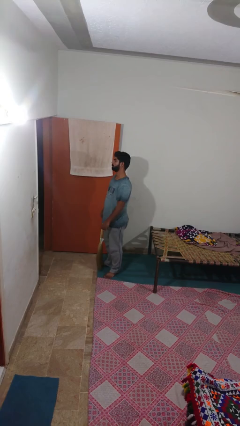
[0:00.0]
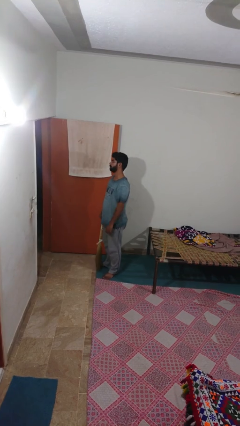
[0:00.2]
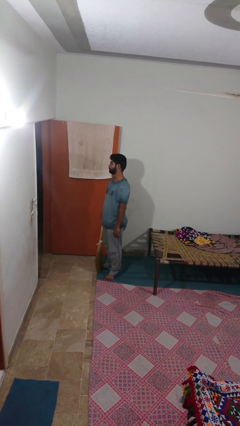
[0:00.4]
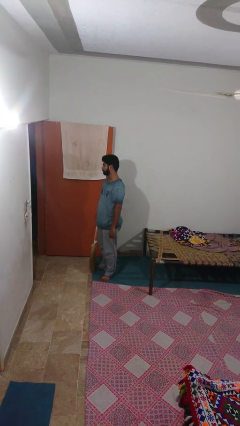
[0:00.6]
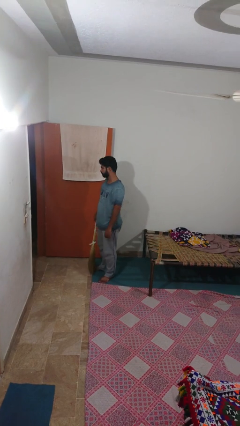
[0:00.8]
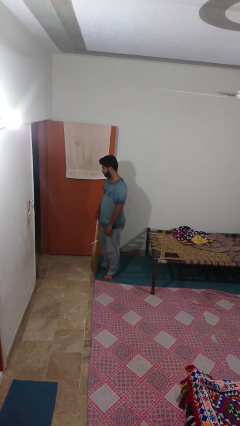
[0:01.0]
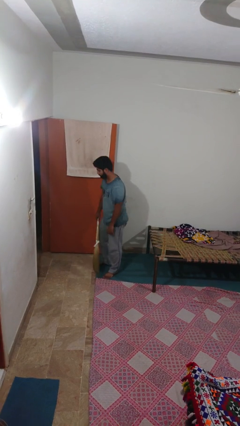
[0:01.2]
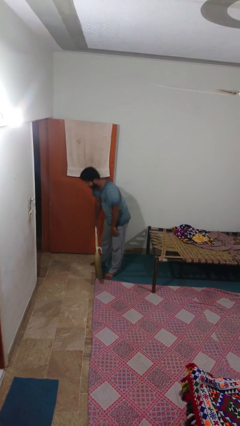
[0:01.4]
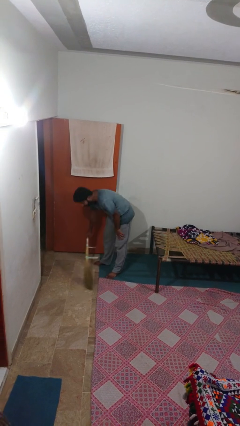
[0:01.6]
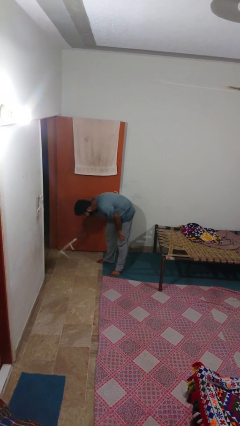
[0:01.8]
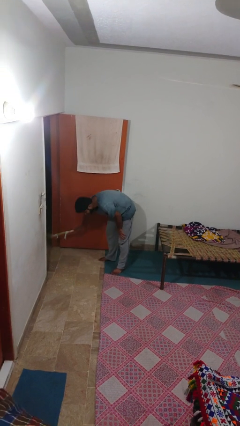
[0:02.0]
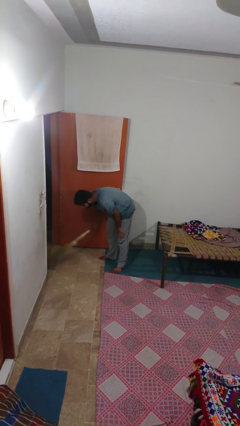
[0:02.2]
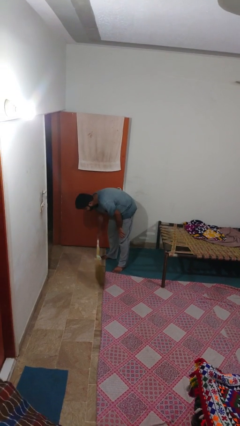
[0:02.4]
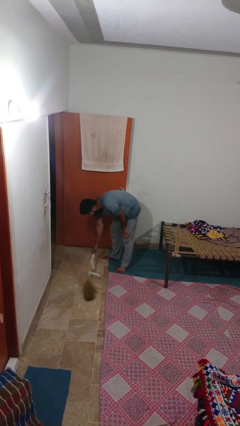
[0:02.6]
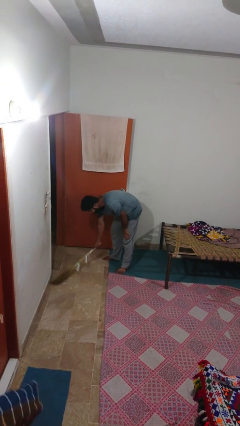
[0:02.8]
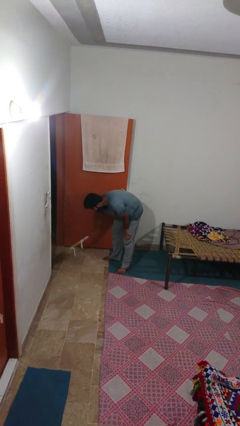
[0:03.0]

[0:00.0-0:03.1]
person sweeps floor

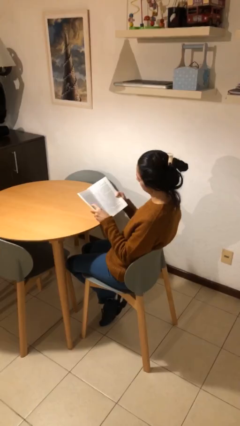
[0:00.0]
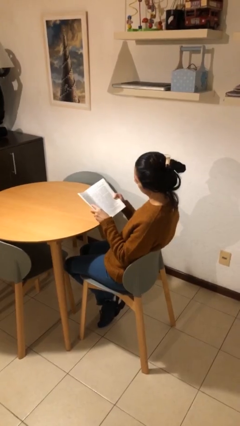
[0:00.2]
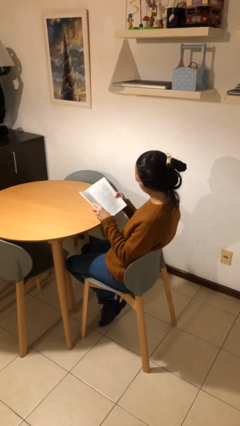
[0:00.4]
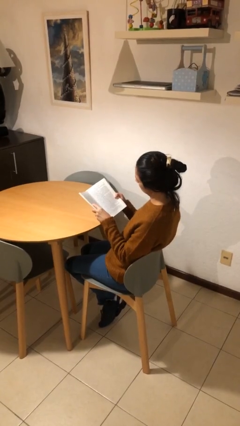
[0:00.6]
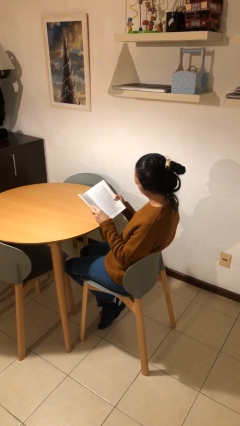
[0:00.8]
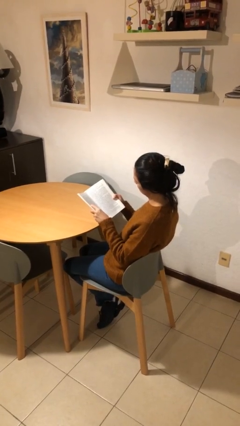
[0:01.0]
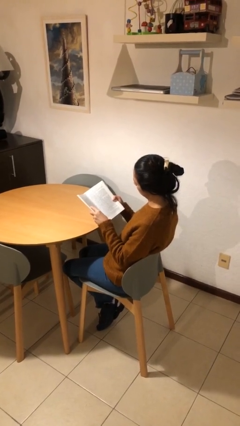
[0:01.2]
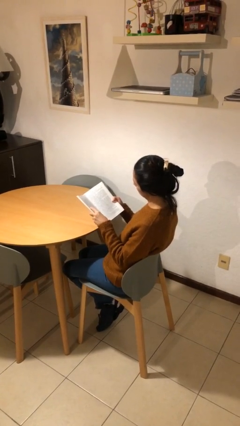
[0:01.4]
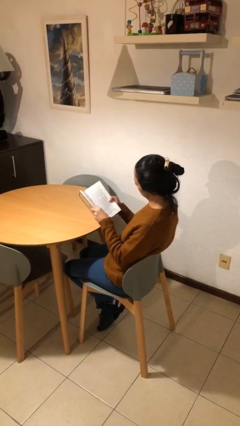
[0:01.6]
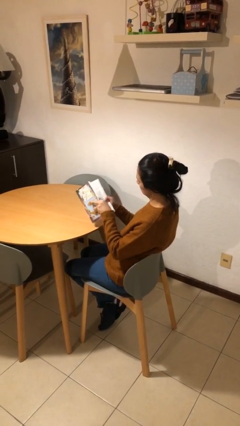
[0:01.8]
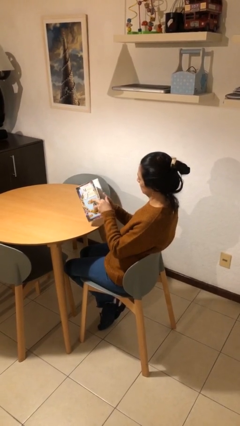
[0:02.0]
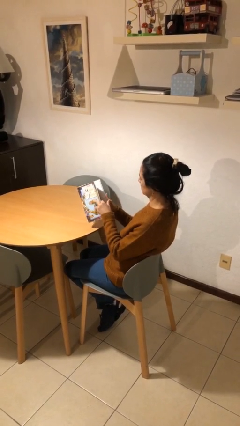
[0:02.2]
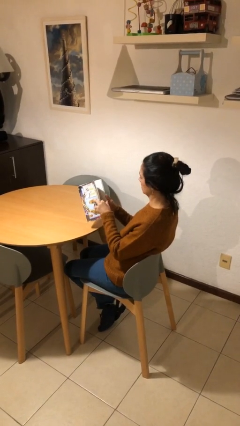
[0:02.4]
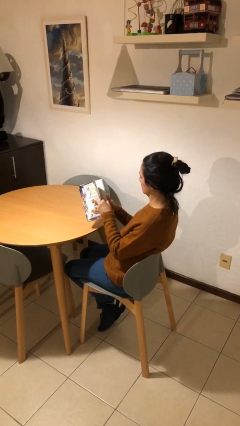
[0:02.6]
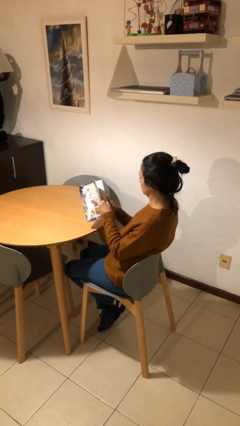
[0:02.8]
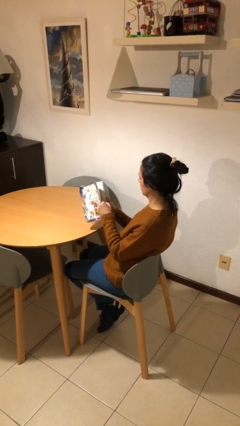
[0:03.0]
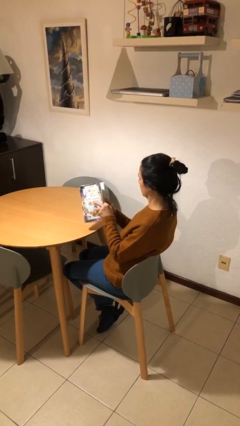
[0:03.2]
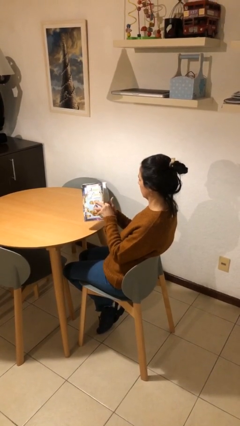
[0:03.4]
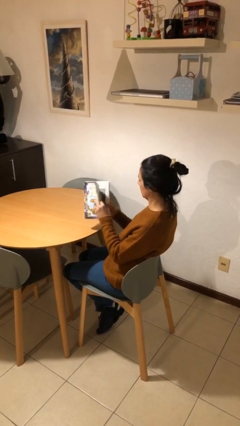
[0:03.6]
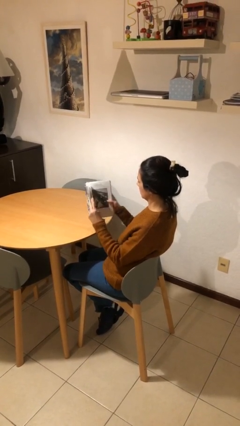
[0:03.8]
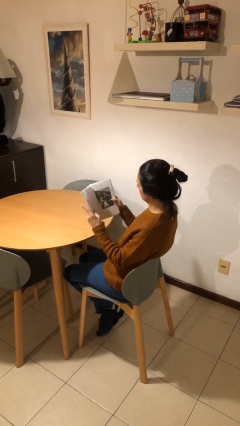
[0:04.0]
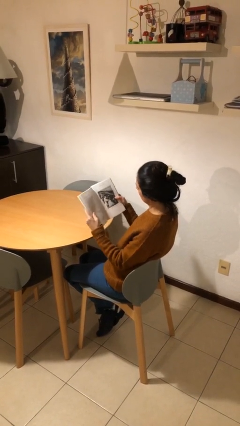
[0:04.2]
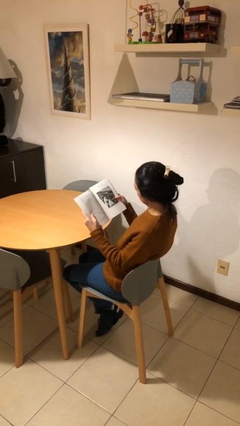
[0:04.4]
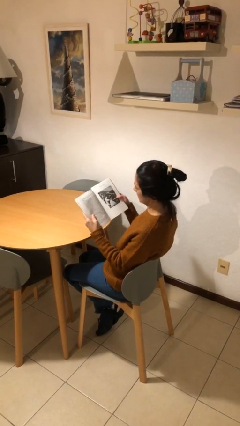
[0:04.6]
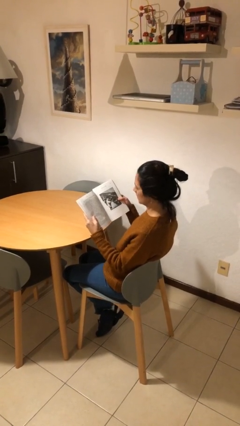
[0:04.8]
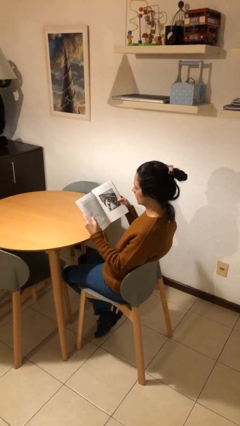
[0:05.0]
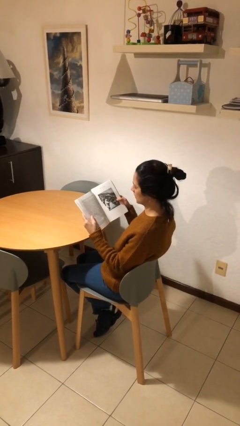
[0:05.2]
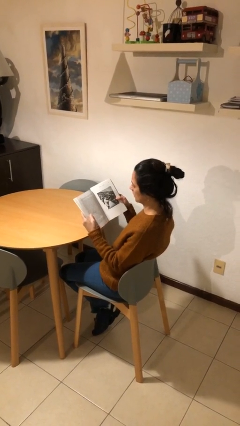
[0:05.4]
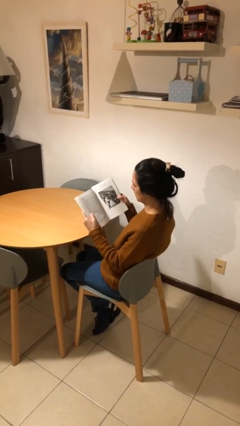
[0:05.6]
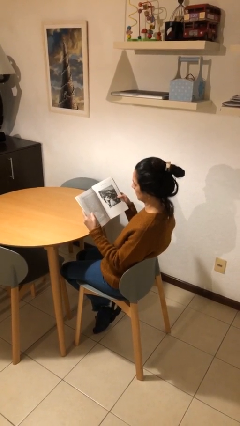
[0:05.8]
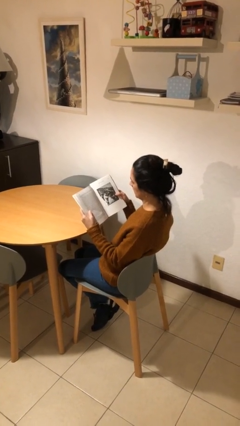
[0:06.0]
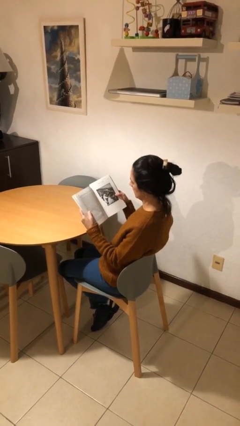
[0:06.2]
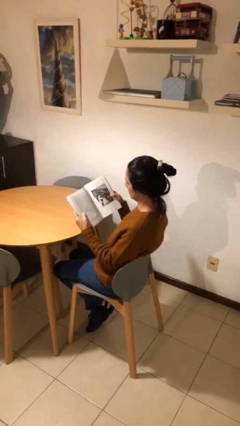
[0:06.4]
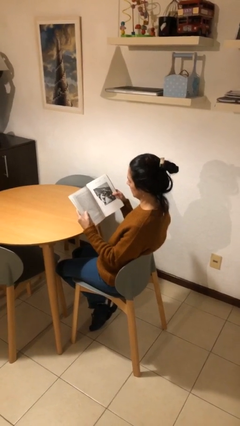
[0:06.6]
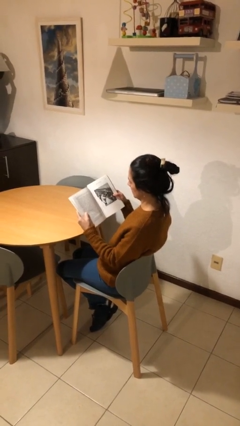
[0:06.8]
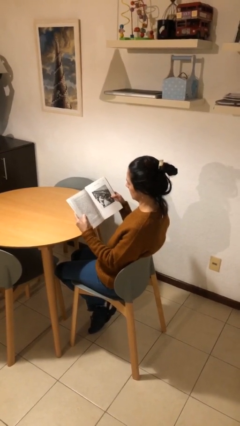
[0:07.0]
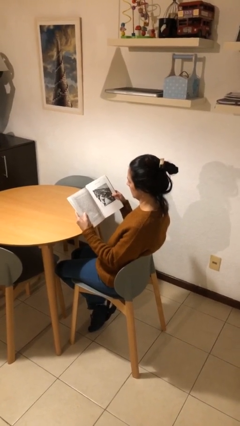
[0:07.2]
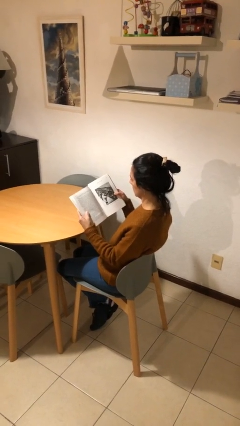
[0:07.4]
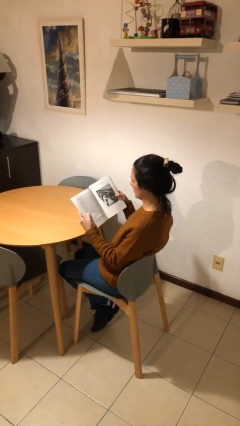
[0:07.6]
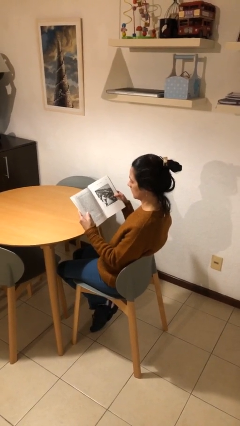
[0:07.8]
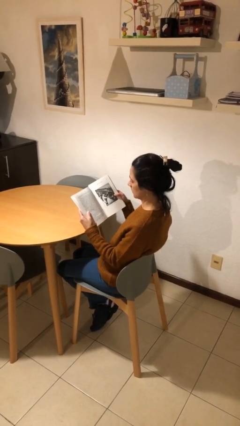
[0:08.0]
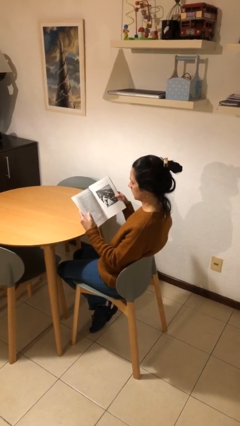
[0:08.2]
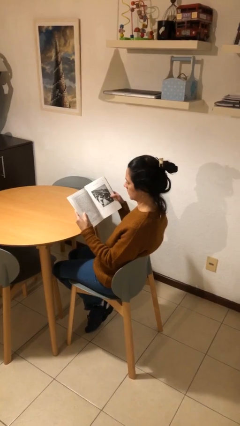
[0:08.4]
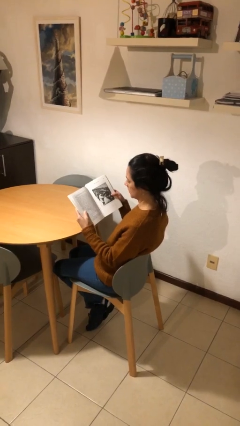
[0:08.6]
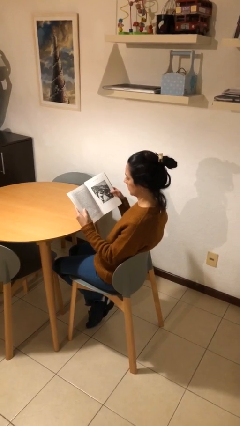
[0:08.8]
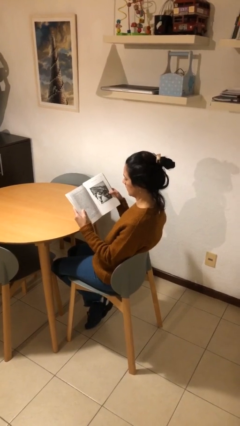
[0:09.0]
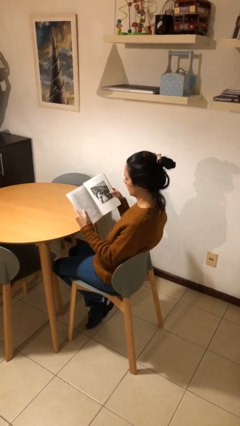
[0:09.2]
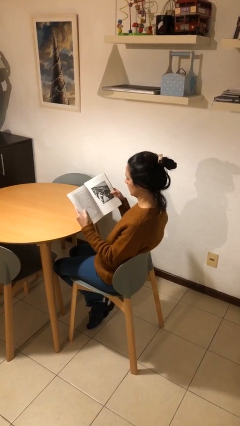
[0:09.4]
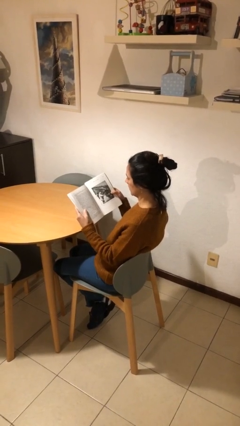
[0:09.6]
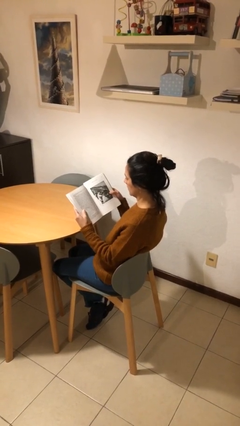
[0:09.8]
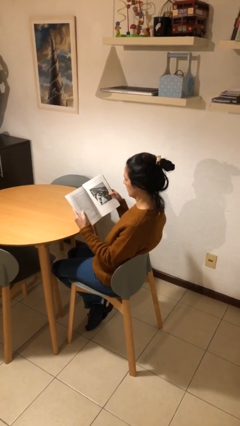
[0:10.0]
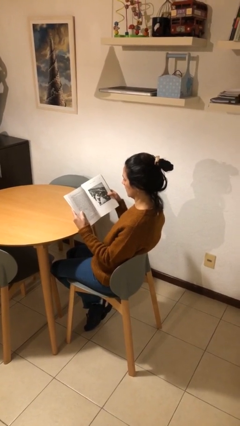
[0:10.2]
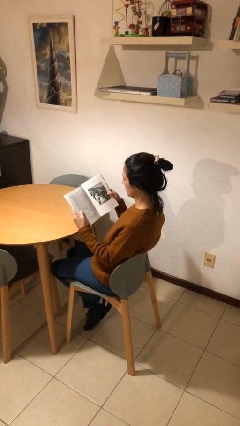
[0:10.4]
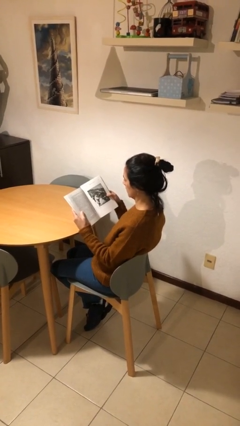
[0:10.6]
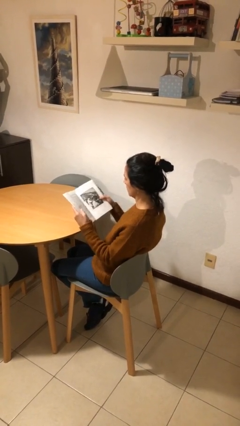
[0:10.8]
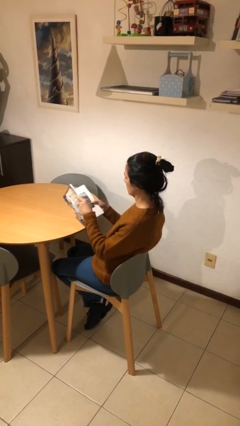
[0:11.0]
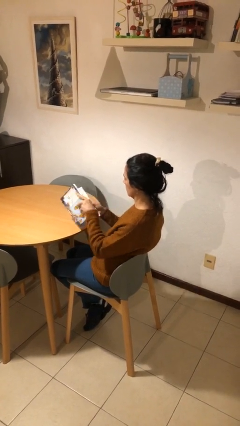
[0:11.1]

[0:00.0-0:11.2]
person reads document

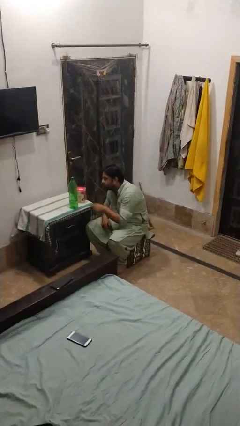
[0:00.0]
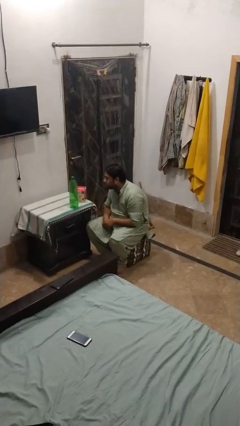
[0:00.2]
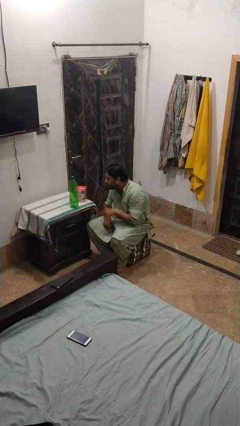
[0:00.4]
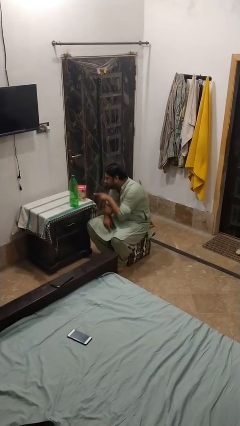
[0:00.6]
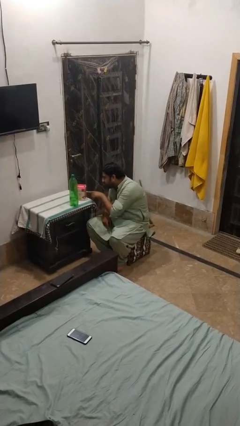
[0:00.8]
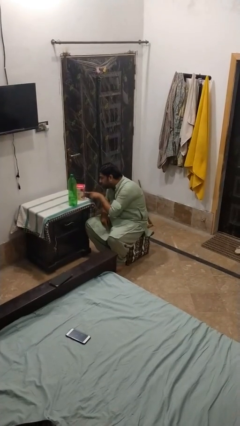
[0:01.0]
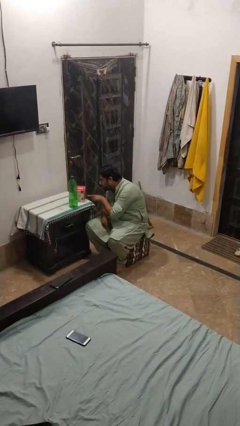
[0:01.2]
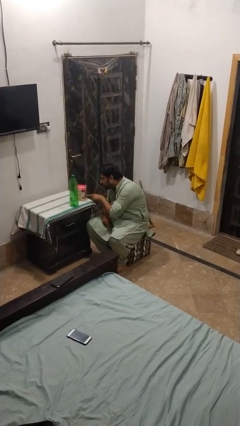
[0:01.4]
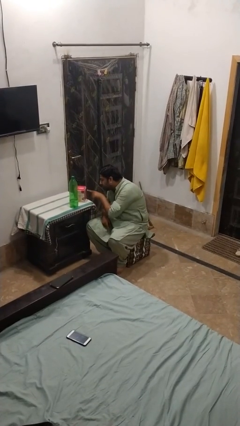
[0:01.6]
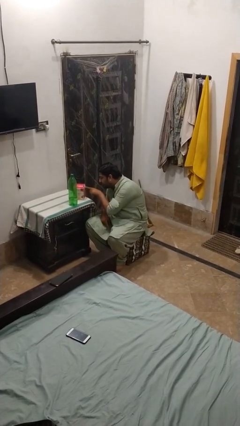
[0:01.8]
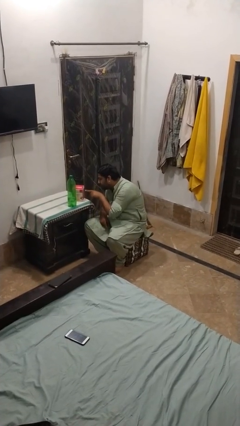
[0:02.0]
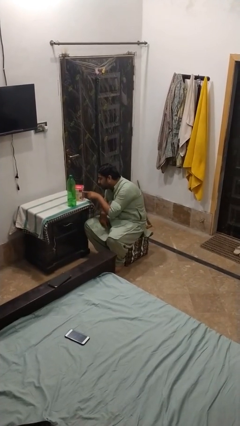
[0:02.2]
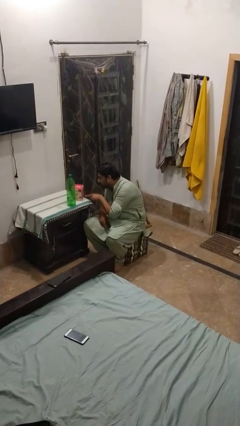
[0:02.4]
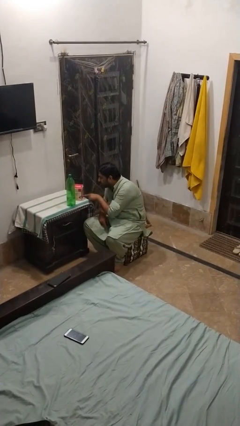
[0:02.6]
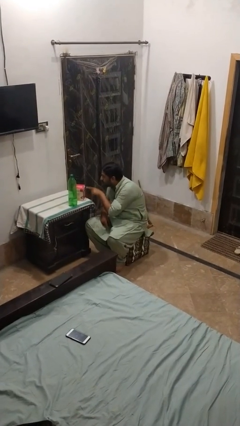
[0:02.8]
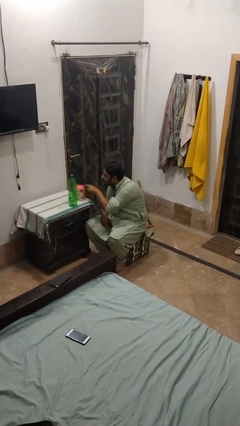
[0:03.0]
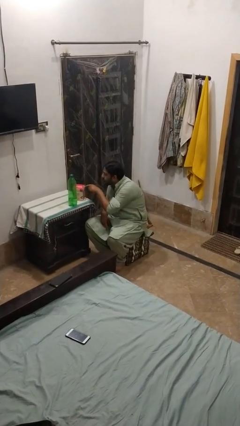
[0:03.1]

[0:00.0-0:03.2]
person taps object with finger

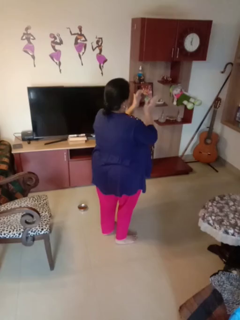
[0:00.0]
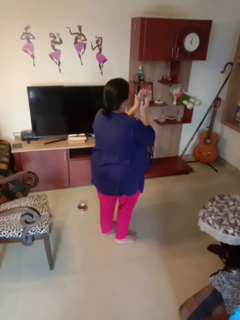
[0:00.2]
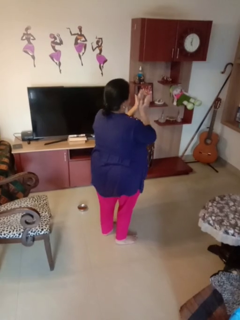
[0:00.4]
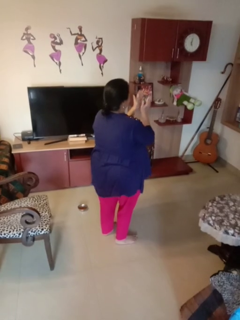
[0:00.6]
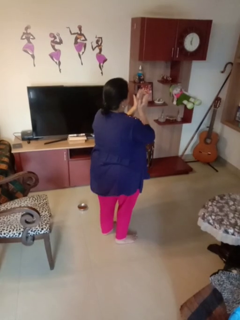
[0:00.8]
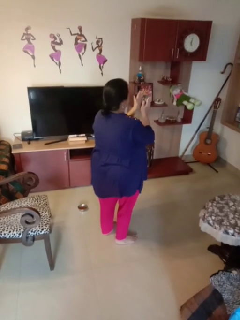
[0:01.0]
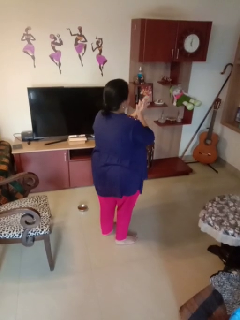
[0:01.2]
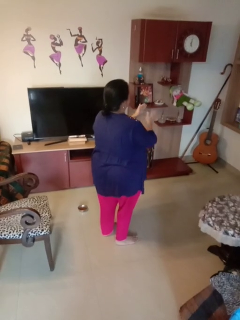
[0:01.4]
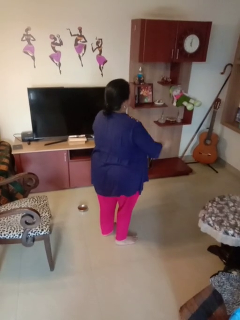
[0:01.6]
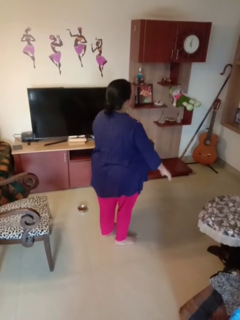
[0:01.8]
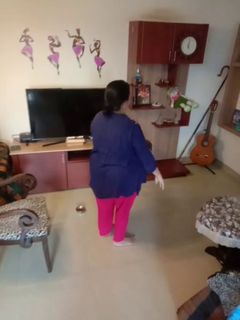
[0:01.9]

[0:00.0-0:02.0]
person claps hands
